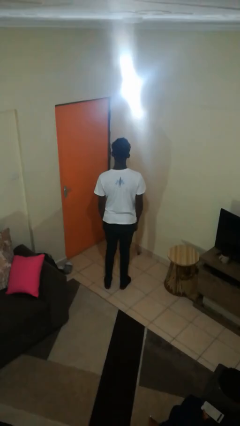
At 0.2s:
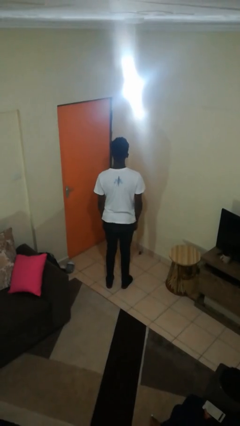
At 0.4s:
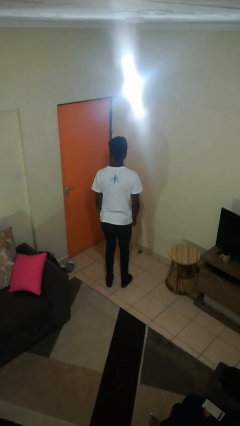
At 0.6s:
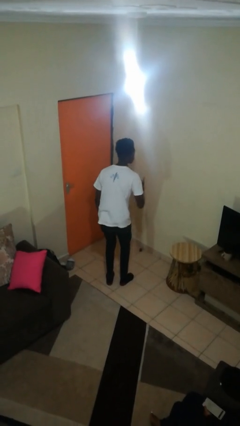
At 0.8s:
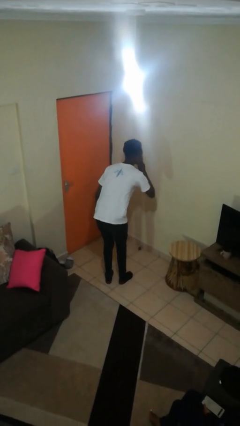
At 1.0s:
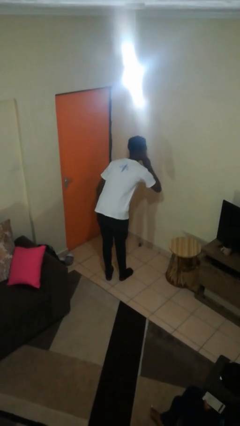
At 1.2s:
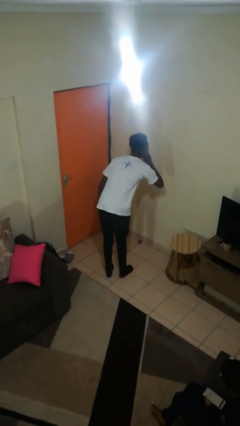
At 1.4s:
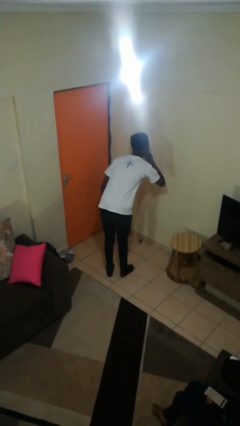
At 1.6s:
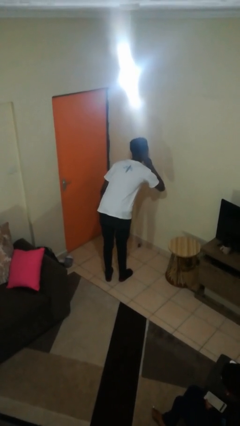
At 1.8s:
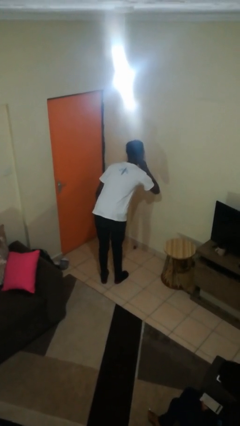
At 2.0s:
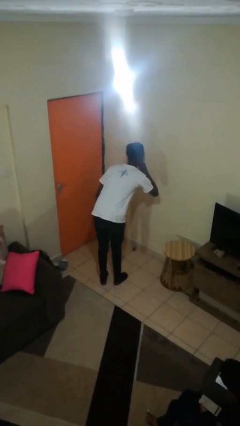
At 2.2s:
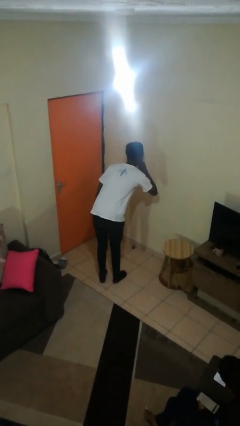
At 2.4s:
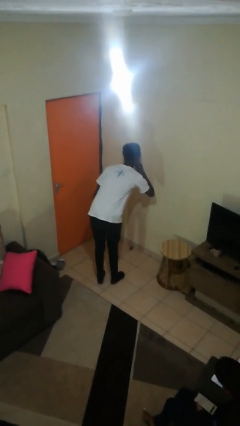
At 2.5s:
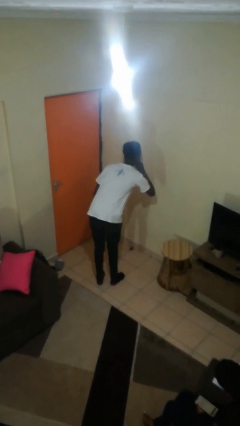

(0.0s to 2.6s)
person gestures be quiet

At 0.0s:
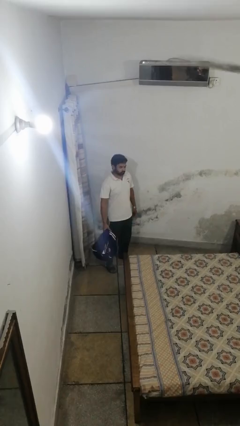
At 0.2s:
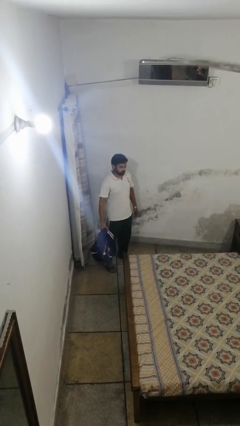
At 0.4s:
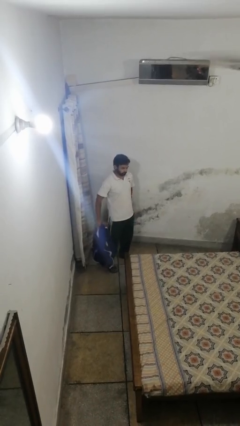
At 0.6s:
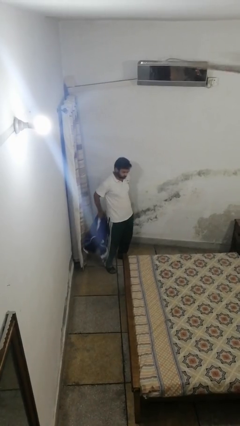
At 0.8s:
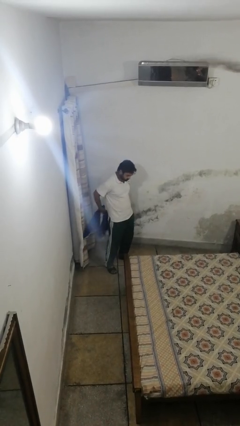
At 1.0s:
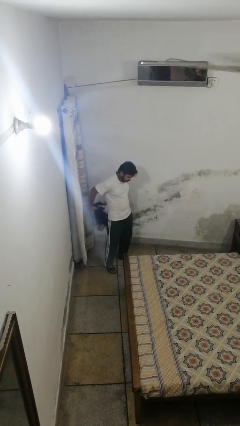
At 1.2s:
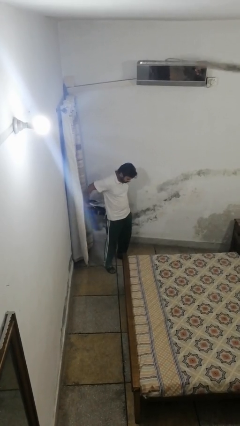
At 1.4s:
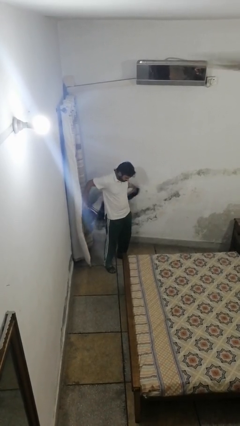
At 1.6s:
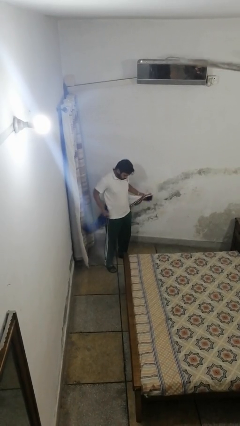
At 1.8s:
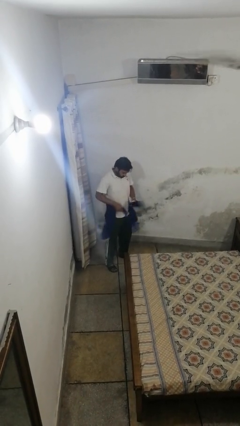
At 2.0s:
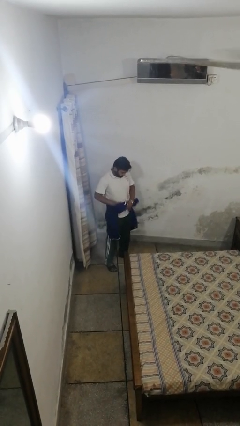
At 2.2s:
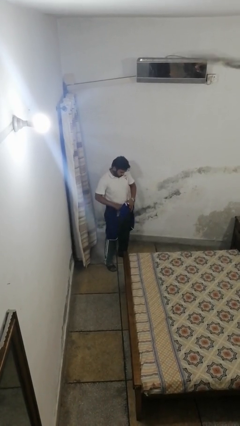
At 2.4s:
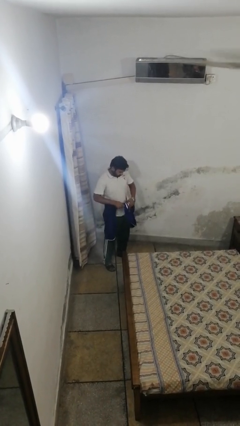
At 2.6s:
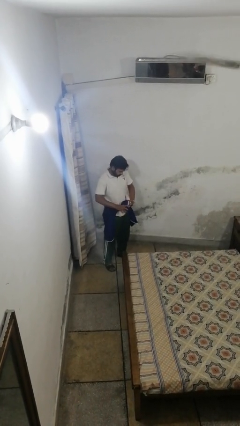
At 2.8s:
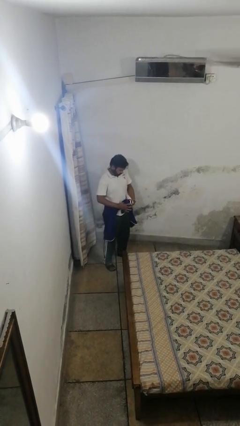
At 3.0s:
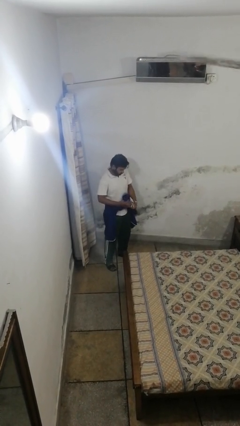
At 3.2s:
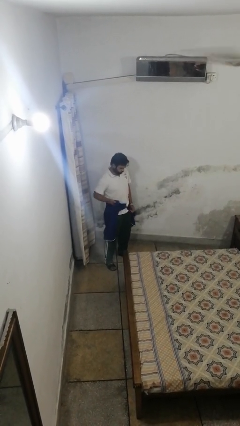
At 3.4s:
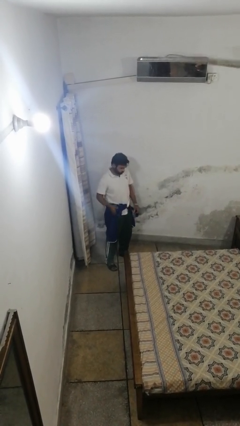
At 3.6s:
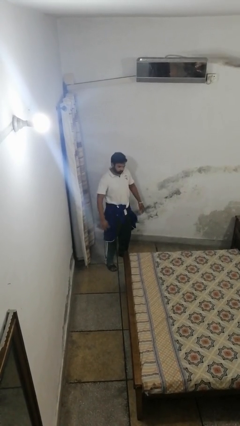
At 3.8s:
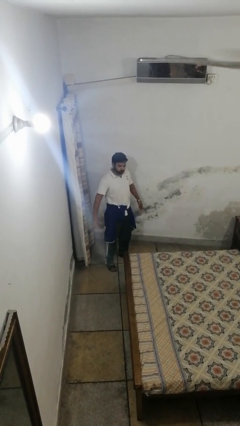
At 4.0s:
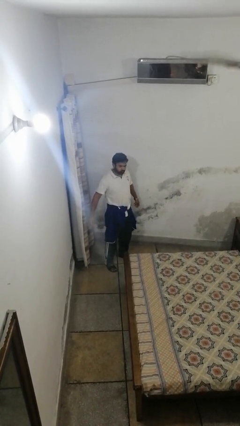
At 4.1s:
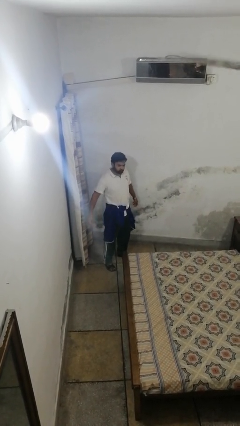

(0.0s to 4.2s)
person ties jacket around waist

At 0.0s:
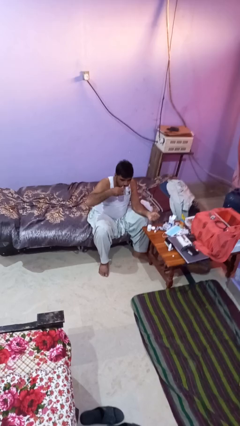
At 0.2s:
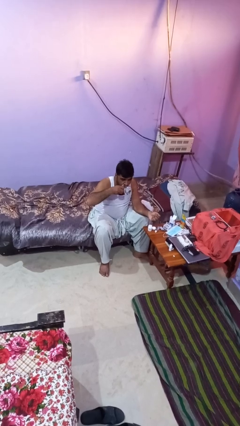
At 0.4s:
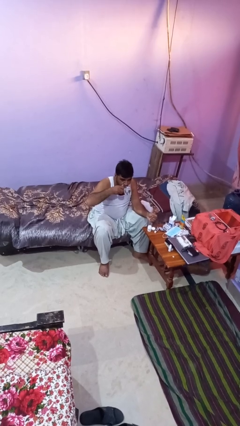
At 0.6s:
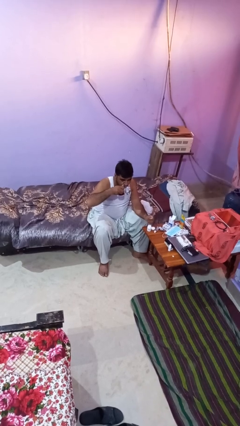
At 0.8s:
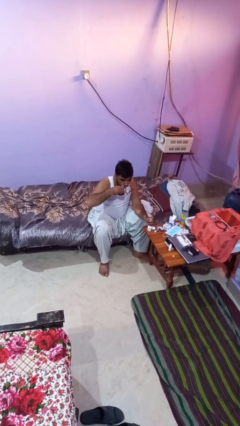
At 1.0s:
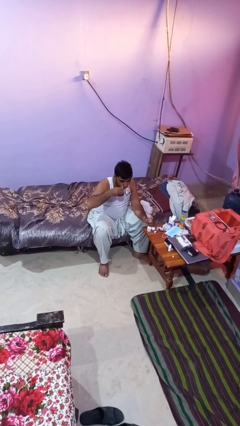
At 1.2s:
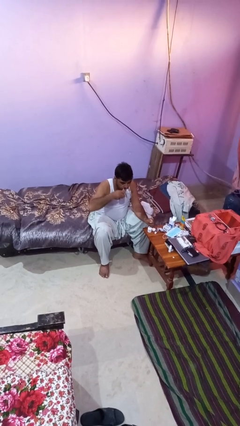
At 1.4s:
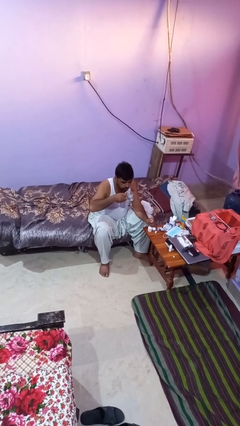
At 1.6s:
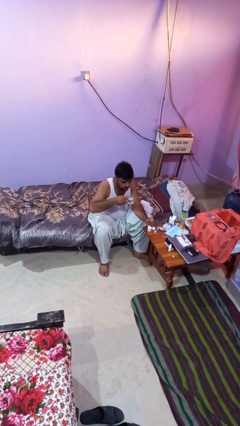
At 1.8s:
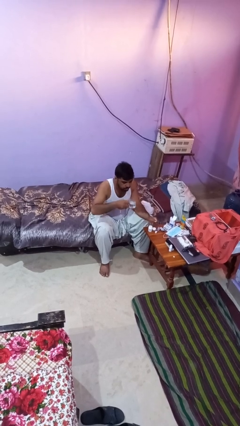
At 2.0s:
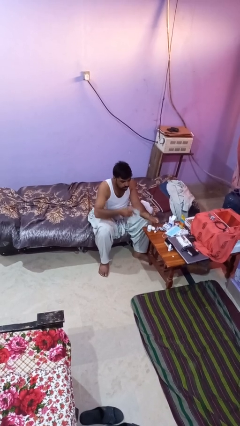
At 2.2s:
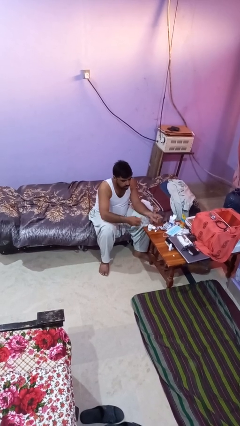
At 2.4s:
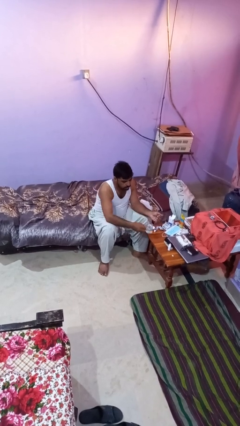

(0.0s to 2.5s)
person drinks from cup

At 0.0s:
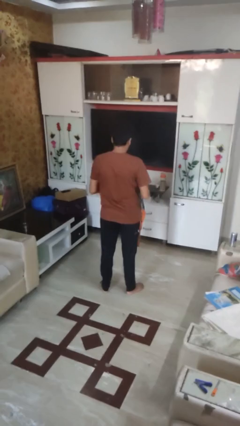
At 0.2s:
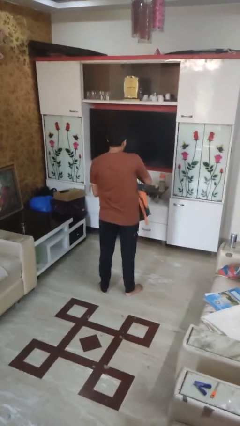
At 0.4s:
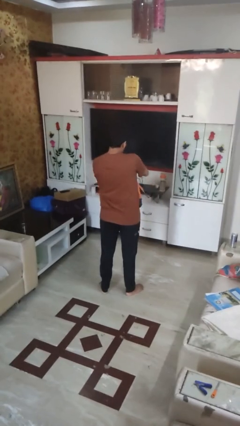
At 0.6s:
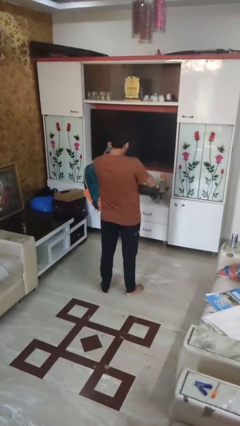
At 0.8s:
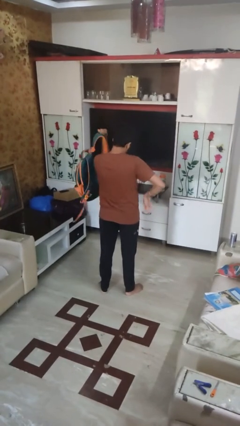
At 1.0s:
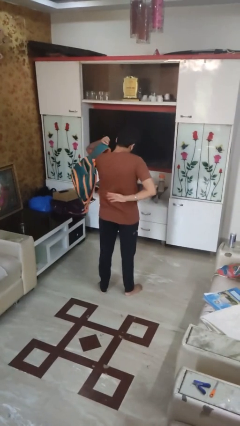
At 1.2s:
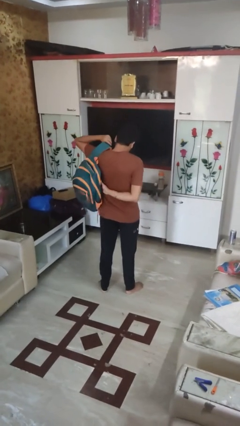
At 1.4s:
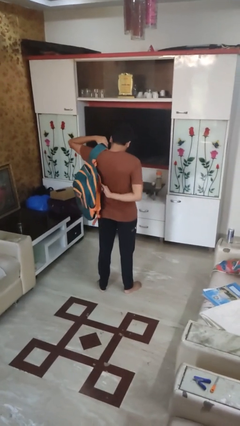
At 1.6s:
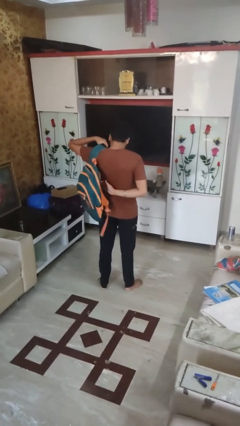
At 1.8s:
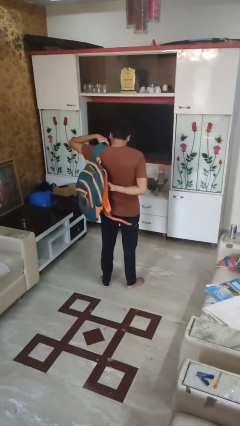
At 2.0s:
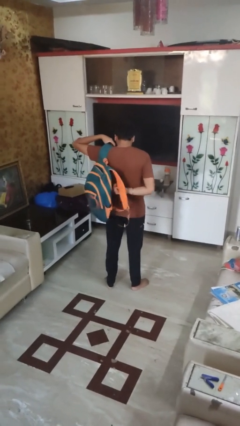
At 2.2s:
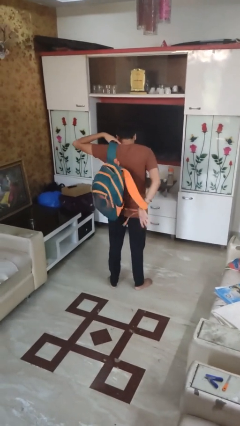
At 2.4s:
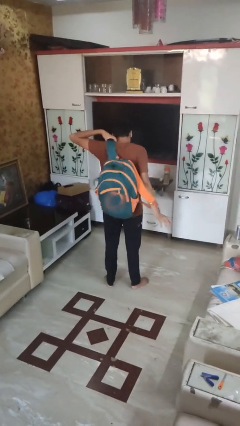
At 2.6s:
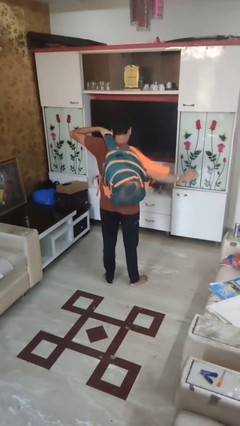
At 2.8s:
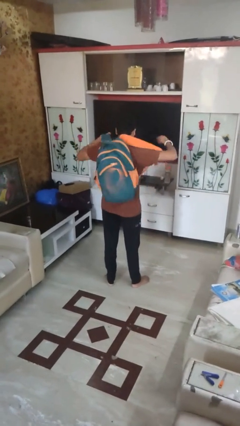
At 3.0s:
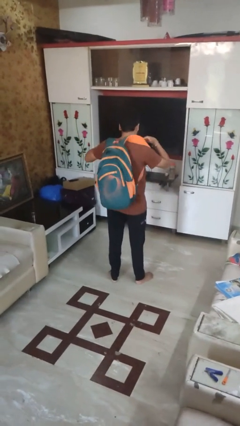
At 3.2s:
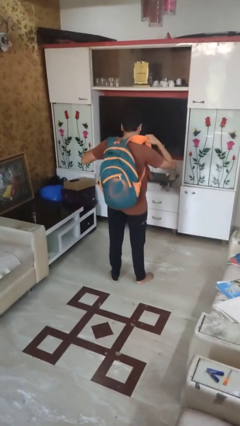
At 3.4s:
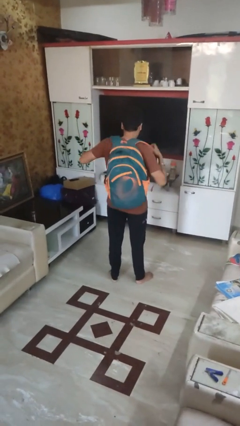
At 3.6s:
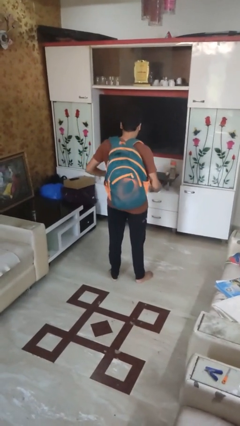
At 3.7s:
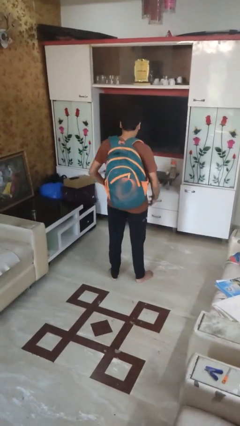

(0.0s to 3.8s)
person puts on backpack

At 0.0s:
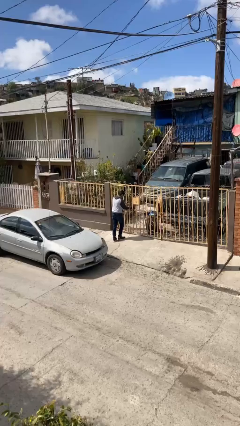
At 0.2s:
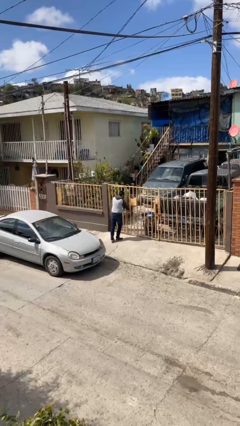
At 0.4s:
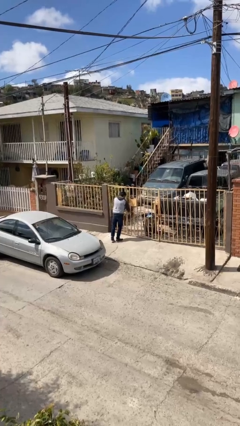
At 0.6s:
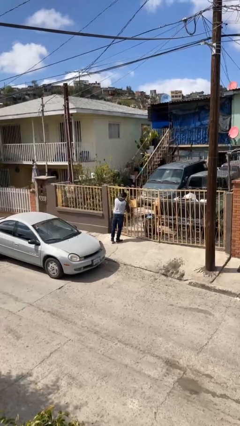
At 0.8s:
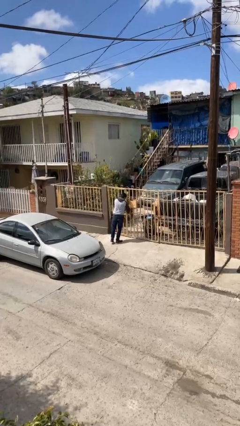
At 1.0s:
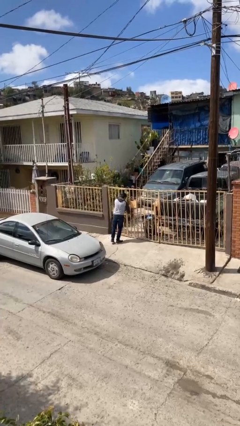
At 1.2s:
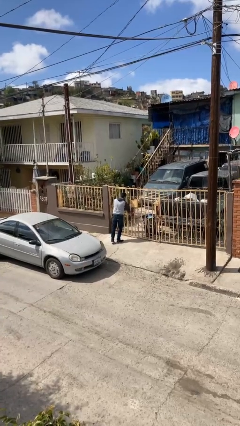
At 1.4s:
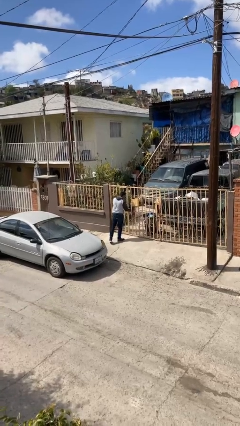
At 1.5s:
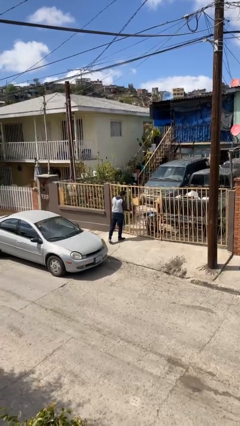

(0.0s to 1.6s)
person closes facility door

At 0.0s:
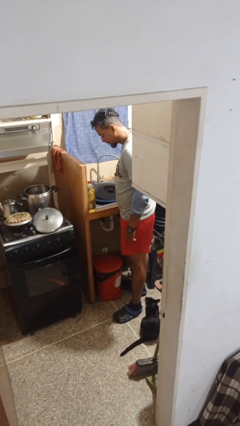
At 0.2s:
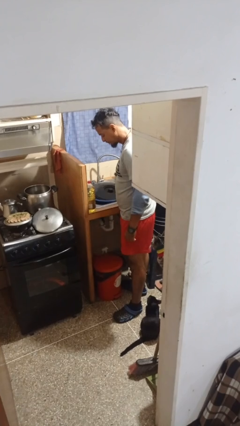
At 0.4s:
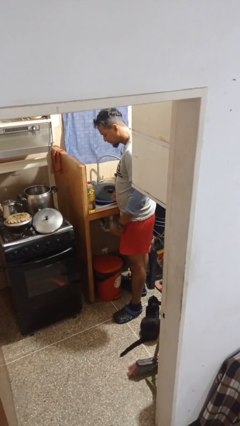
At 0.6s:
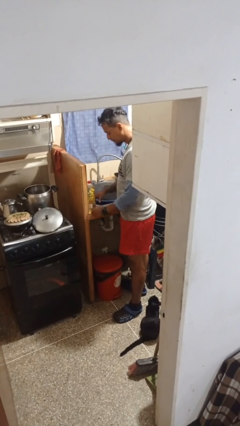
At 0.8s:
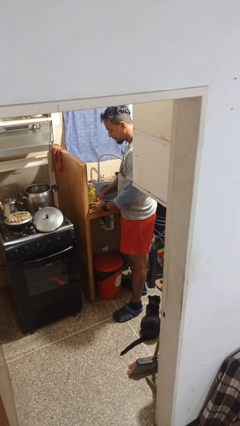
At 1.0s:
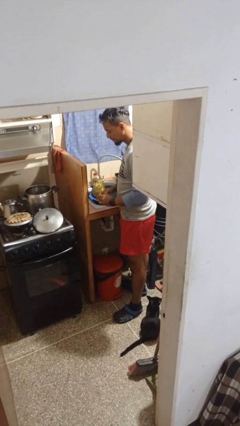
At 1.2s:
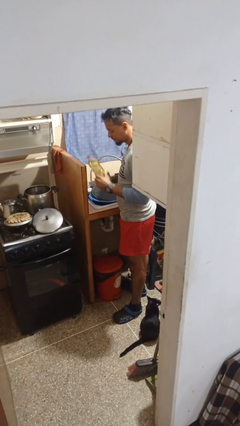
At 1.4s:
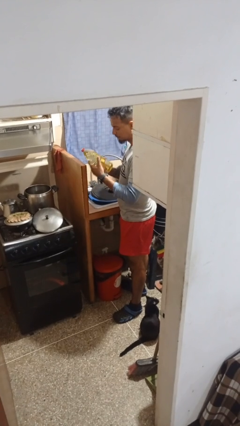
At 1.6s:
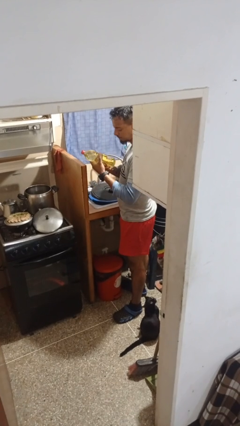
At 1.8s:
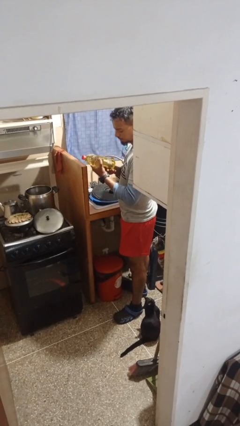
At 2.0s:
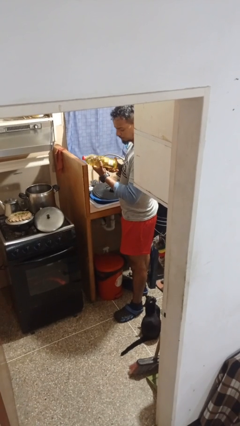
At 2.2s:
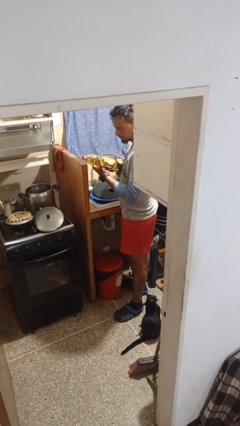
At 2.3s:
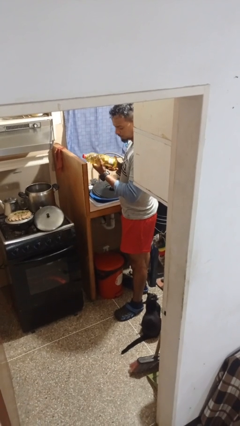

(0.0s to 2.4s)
person picks up object from countertop

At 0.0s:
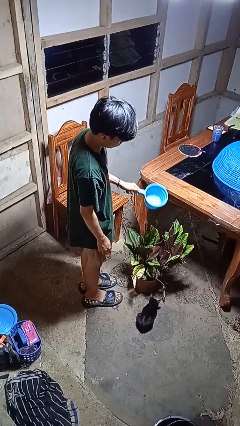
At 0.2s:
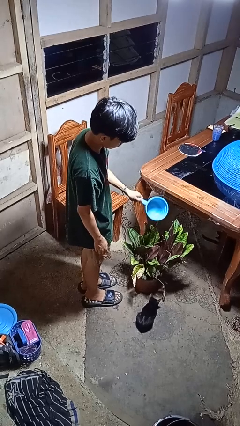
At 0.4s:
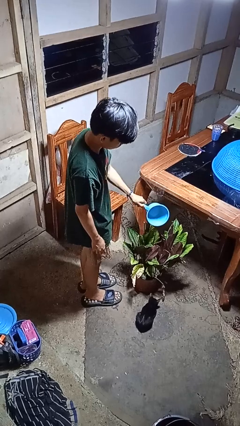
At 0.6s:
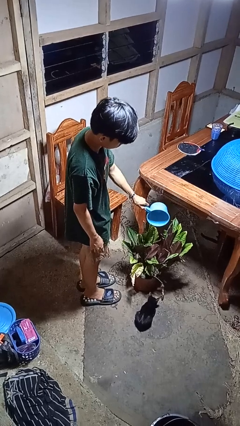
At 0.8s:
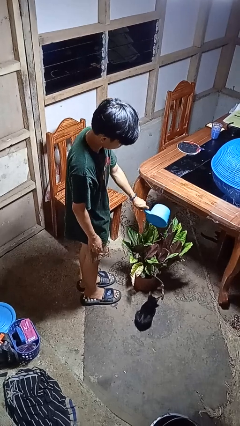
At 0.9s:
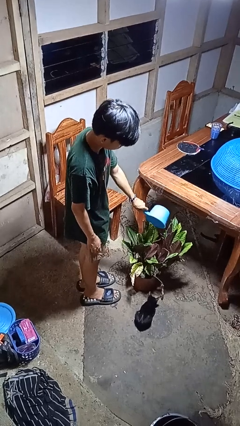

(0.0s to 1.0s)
person waters houseplant
